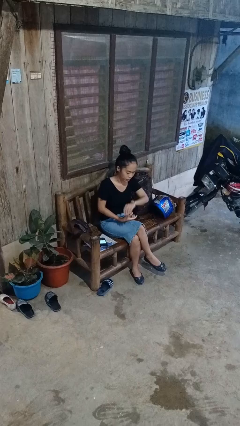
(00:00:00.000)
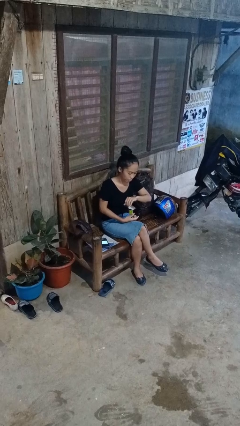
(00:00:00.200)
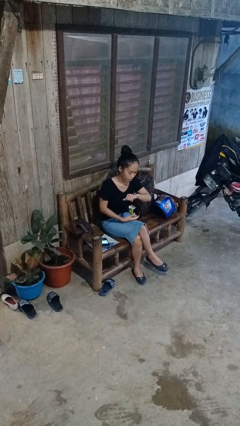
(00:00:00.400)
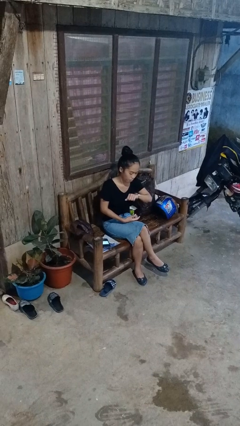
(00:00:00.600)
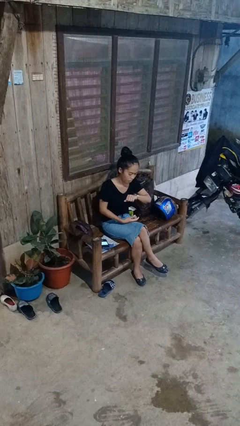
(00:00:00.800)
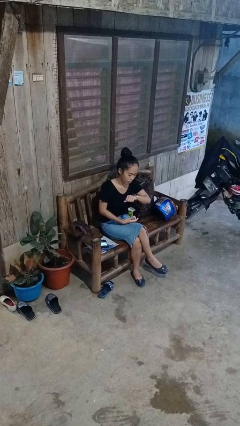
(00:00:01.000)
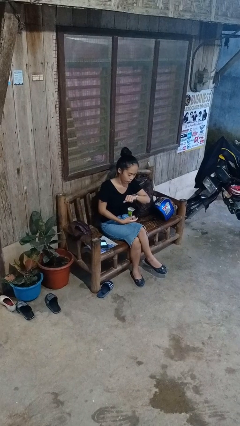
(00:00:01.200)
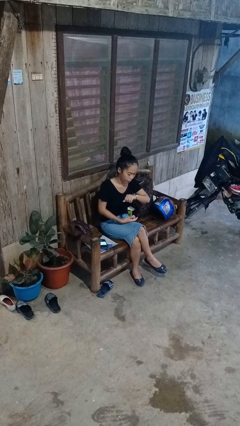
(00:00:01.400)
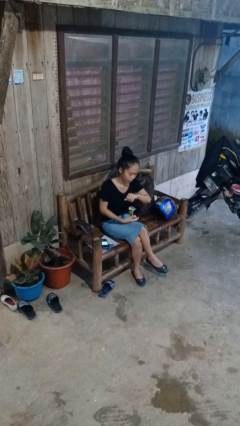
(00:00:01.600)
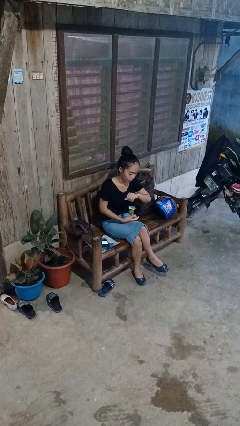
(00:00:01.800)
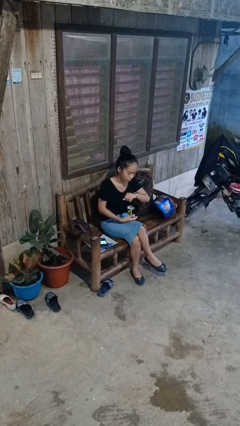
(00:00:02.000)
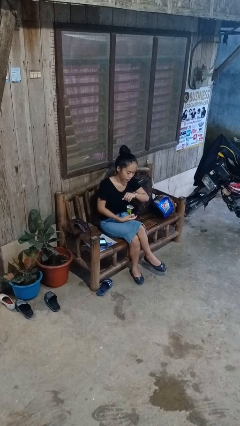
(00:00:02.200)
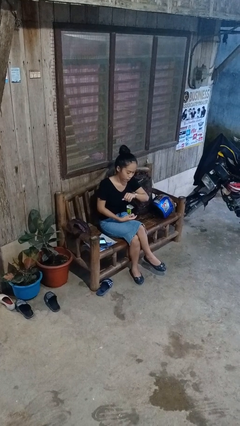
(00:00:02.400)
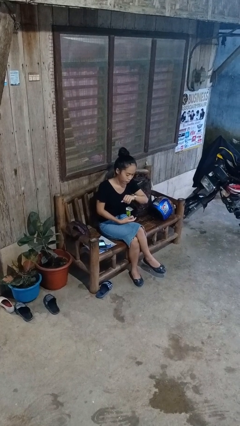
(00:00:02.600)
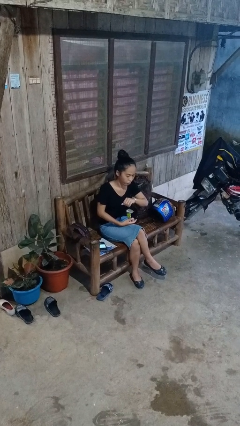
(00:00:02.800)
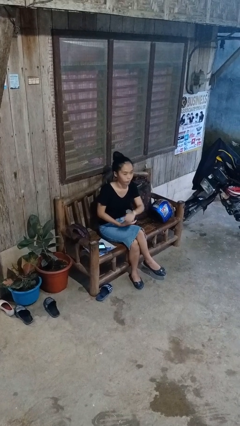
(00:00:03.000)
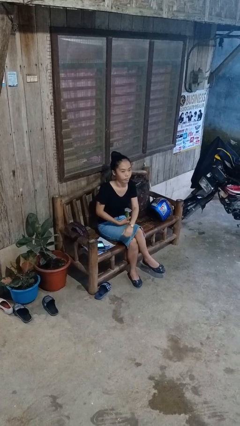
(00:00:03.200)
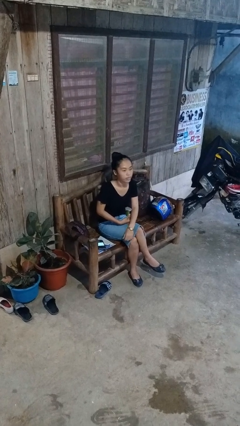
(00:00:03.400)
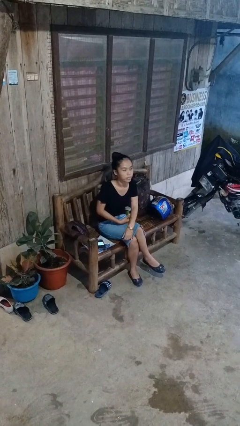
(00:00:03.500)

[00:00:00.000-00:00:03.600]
person looks at wristwatch

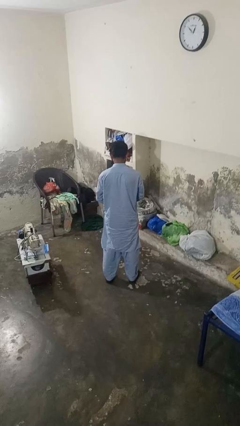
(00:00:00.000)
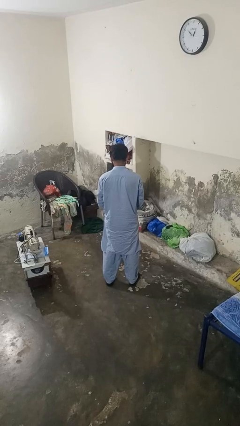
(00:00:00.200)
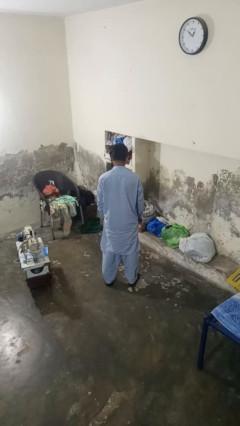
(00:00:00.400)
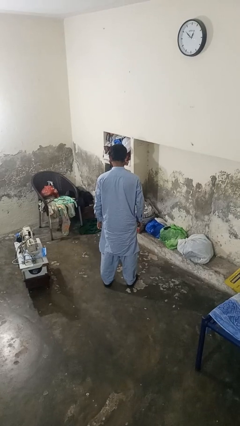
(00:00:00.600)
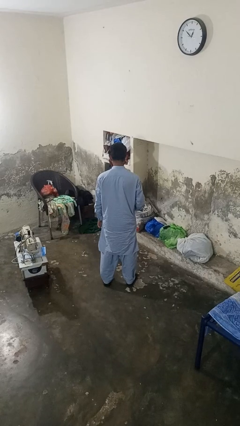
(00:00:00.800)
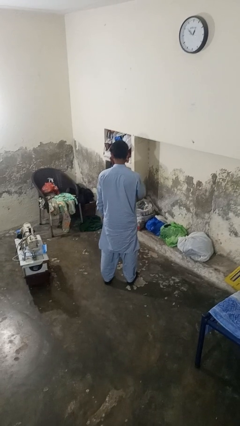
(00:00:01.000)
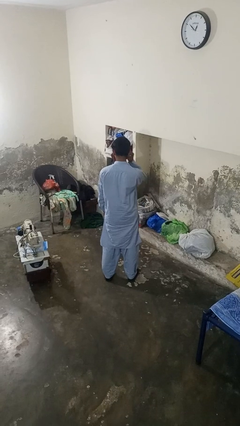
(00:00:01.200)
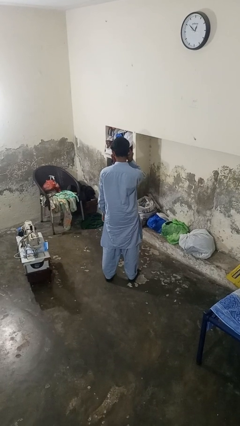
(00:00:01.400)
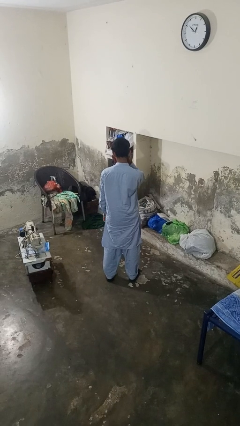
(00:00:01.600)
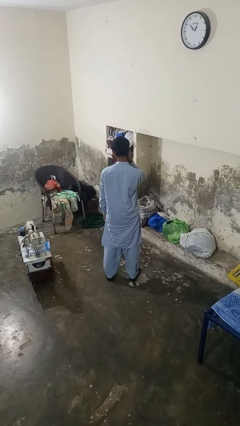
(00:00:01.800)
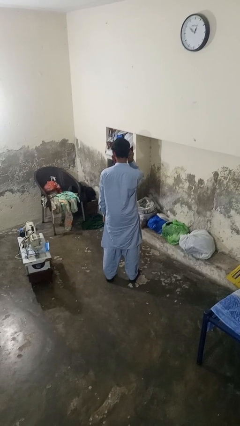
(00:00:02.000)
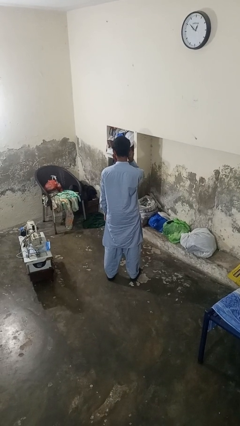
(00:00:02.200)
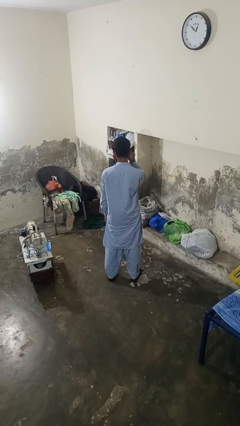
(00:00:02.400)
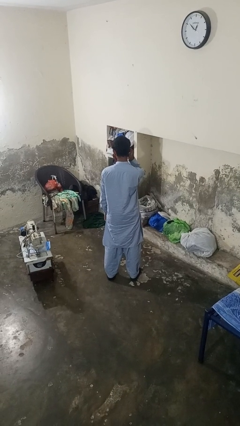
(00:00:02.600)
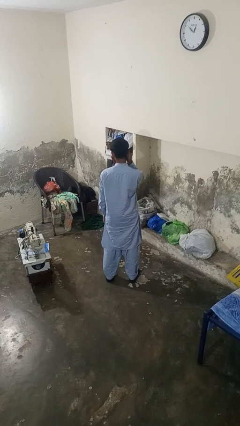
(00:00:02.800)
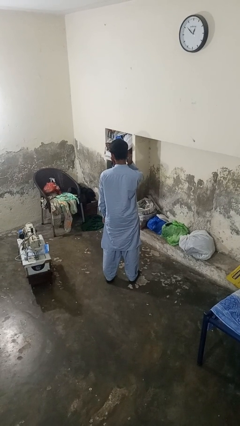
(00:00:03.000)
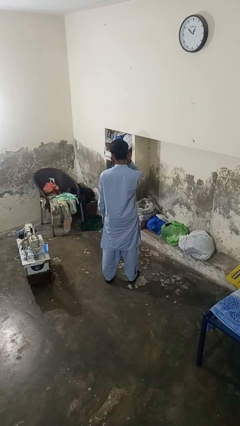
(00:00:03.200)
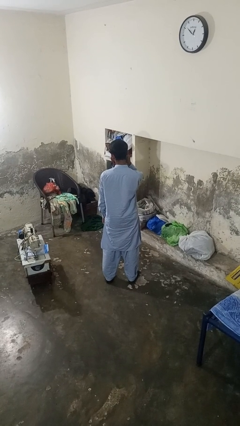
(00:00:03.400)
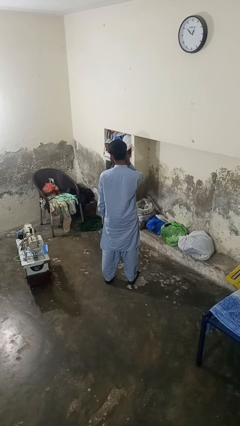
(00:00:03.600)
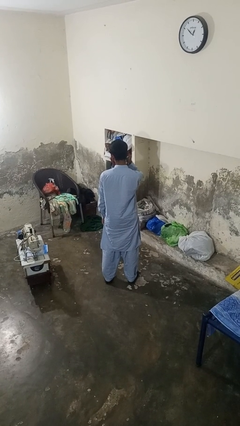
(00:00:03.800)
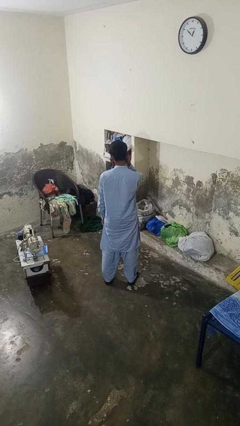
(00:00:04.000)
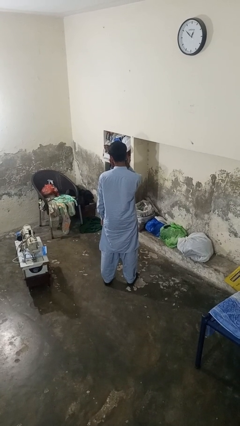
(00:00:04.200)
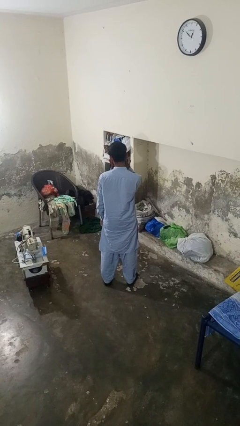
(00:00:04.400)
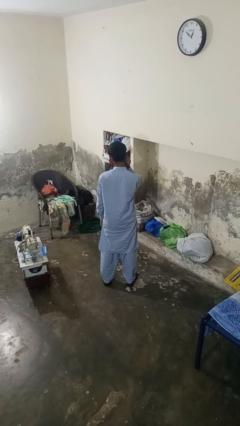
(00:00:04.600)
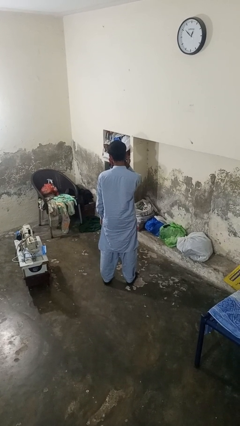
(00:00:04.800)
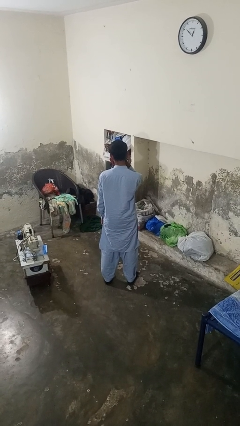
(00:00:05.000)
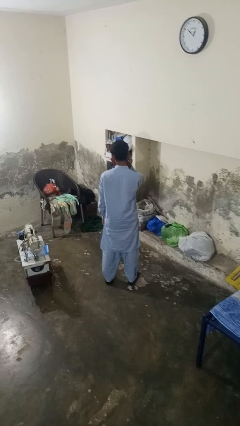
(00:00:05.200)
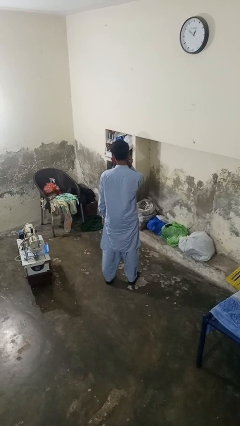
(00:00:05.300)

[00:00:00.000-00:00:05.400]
person touches earlobe

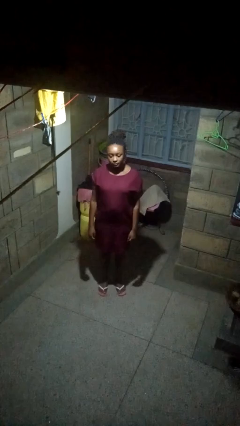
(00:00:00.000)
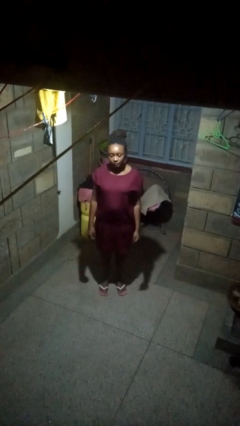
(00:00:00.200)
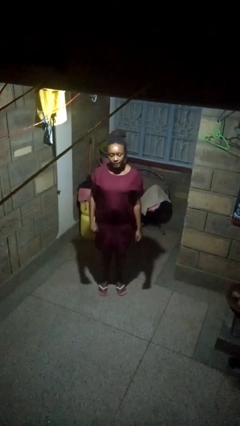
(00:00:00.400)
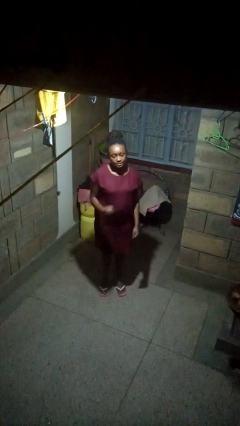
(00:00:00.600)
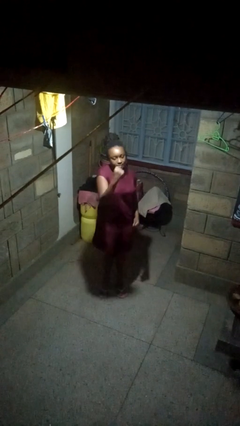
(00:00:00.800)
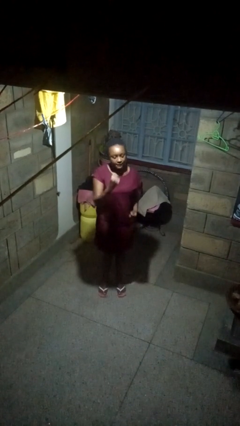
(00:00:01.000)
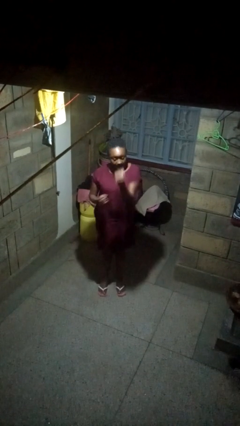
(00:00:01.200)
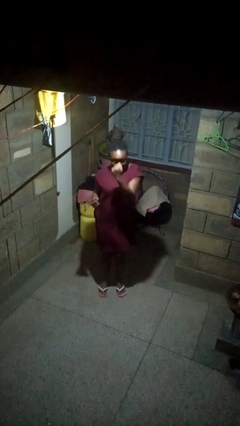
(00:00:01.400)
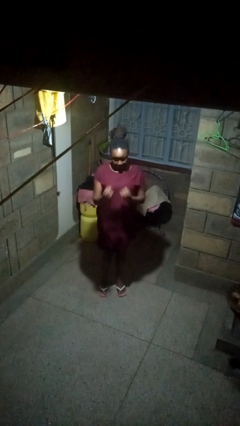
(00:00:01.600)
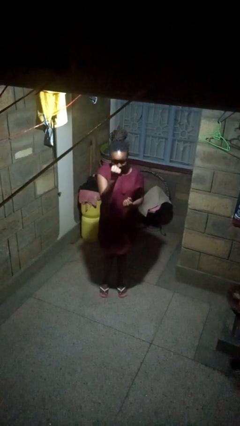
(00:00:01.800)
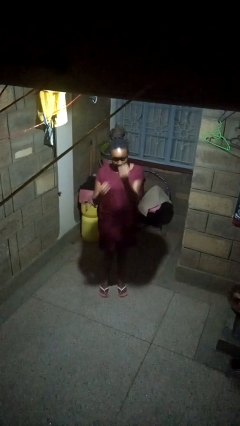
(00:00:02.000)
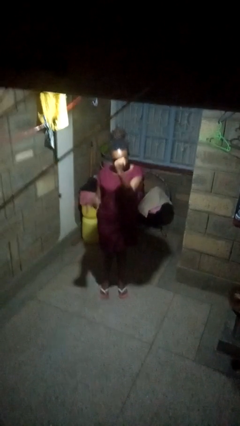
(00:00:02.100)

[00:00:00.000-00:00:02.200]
person punches

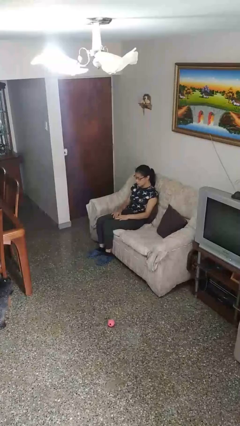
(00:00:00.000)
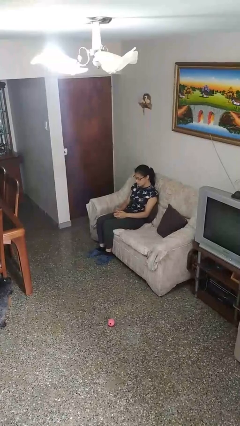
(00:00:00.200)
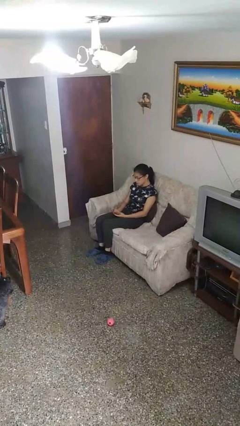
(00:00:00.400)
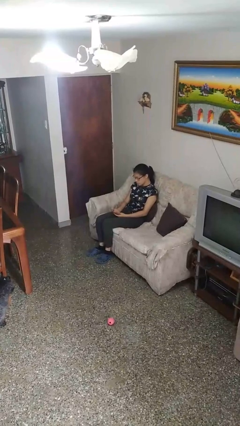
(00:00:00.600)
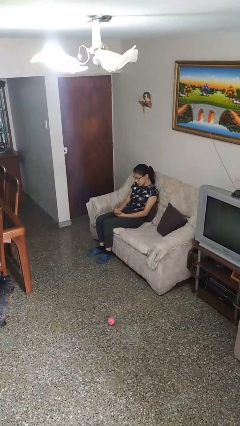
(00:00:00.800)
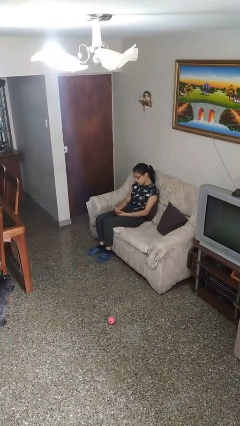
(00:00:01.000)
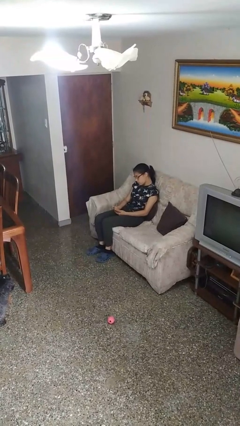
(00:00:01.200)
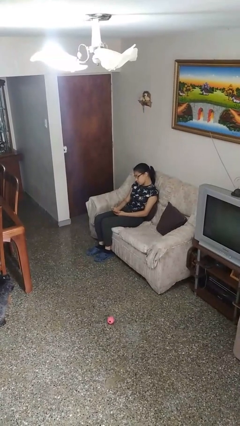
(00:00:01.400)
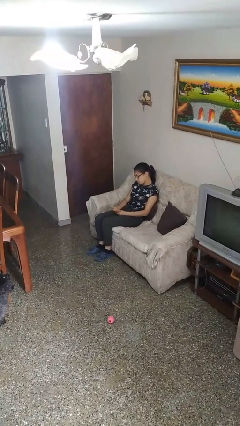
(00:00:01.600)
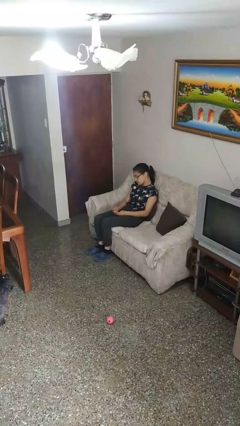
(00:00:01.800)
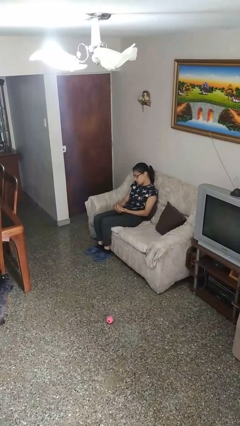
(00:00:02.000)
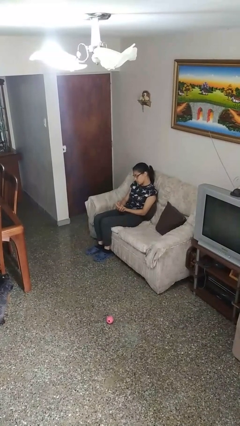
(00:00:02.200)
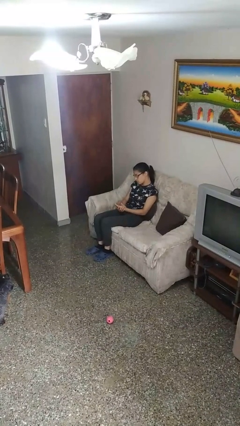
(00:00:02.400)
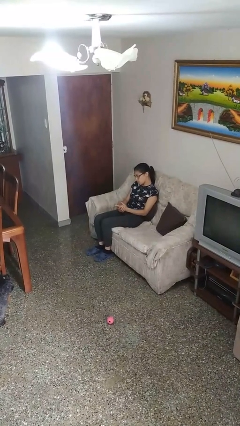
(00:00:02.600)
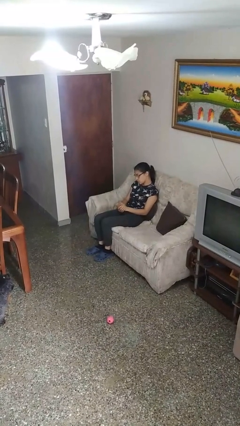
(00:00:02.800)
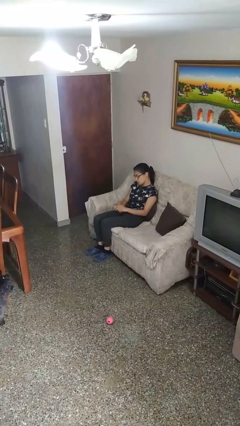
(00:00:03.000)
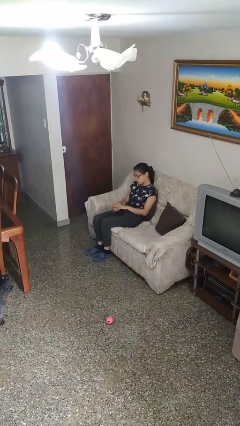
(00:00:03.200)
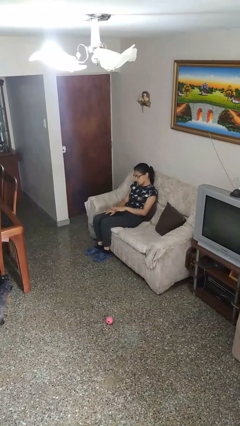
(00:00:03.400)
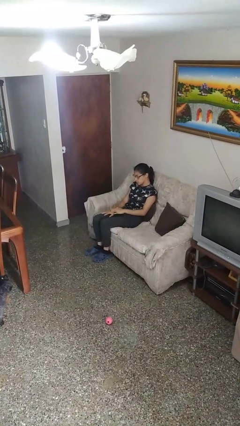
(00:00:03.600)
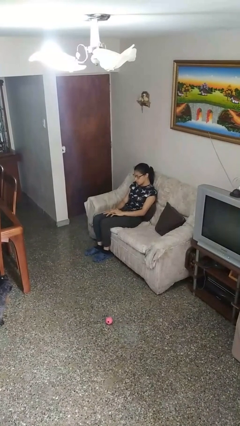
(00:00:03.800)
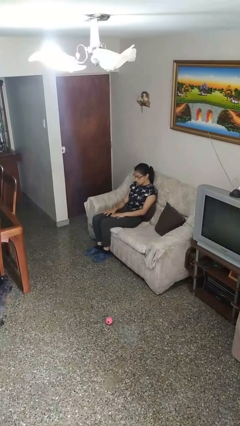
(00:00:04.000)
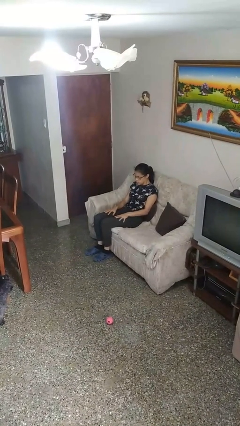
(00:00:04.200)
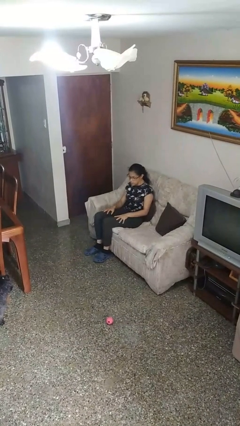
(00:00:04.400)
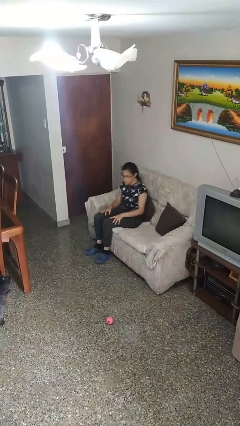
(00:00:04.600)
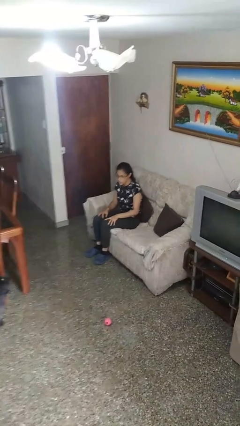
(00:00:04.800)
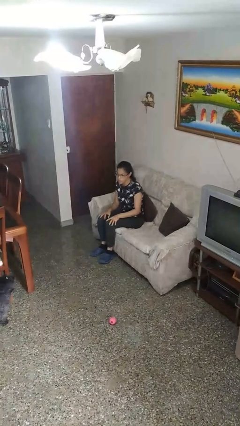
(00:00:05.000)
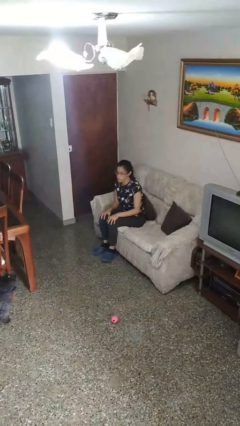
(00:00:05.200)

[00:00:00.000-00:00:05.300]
person looks at hands in lap

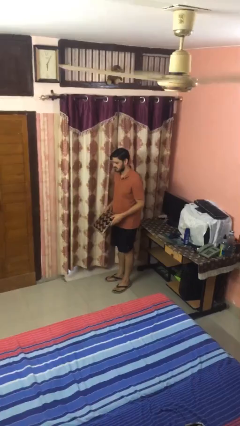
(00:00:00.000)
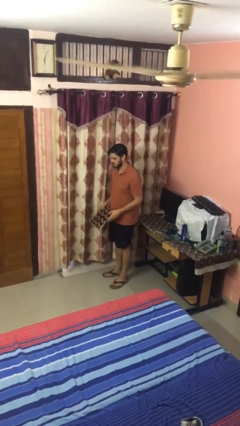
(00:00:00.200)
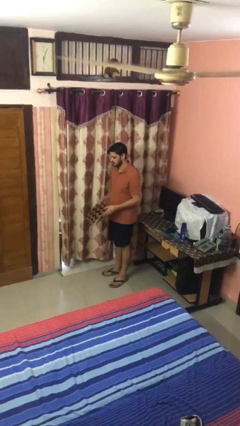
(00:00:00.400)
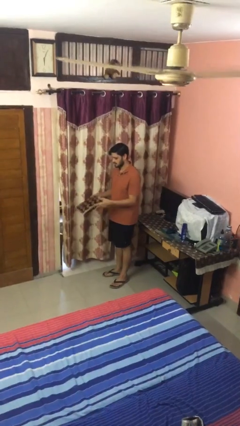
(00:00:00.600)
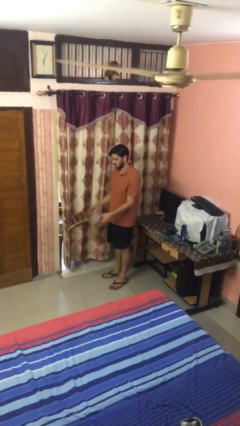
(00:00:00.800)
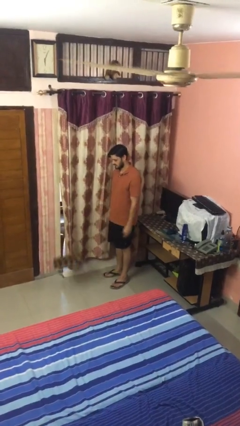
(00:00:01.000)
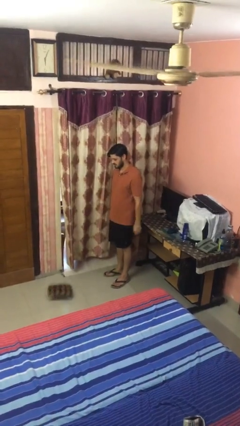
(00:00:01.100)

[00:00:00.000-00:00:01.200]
person throws object to ground
